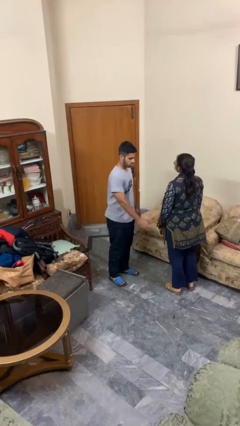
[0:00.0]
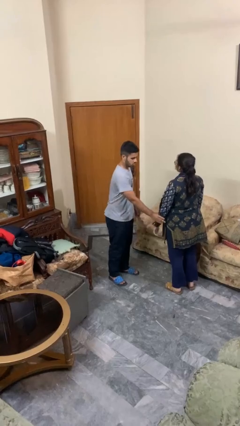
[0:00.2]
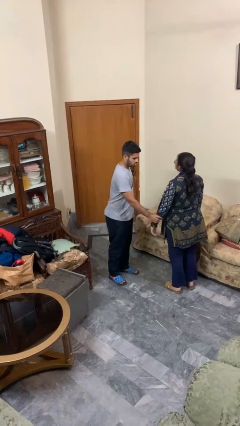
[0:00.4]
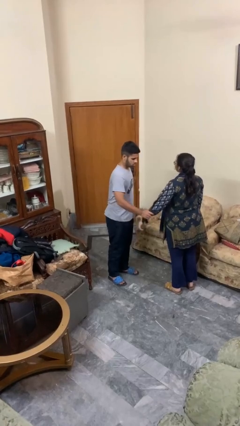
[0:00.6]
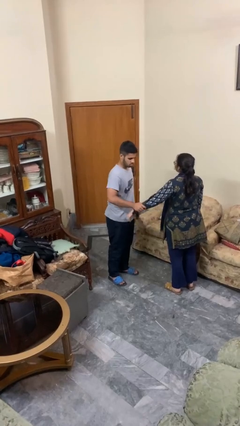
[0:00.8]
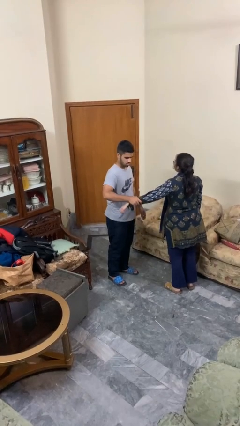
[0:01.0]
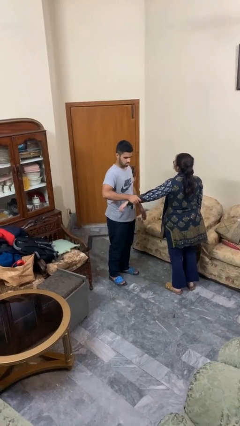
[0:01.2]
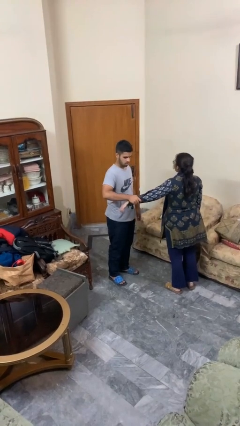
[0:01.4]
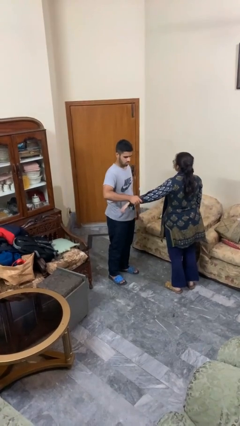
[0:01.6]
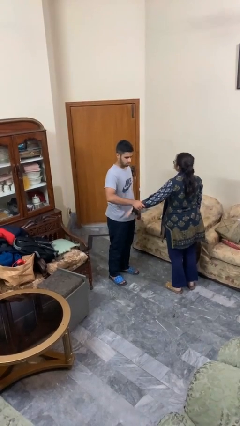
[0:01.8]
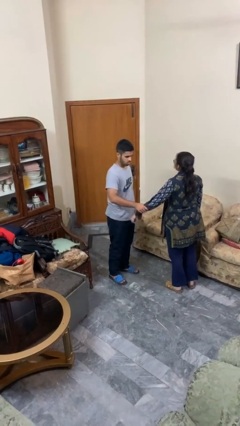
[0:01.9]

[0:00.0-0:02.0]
person grabs person by forearm

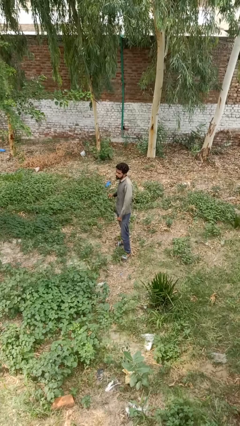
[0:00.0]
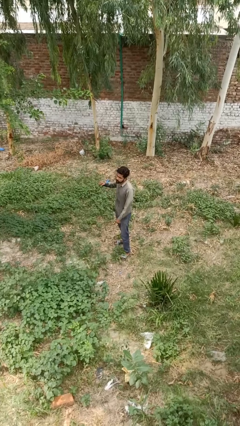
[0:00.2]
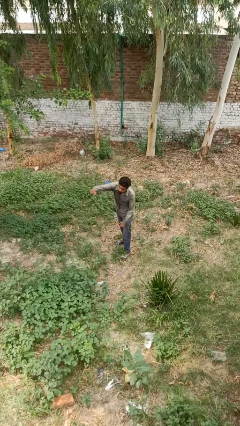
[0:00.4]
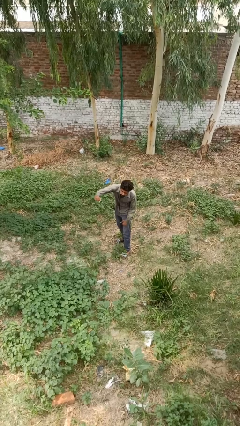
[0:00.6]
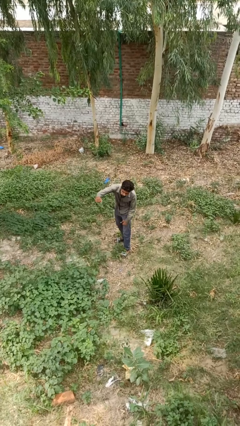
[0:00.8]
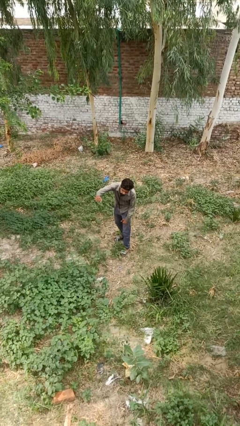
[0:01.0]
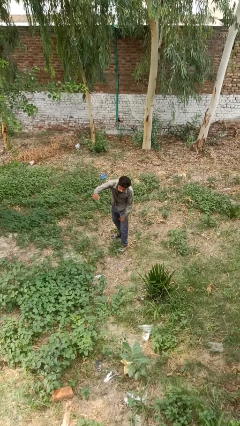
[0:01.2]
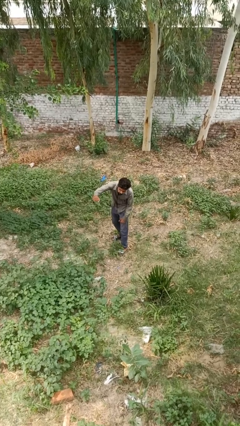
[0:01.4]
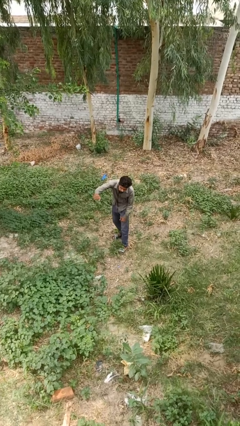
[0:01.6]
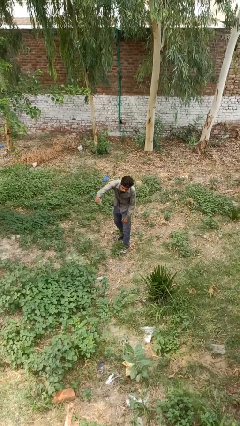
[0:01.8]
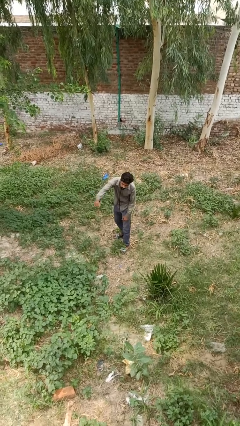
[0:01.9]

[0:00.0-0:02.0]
person punches

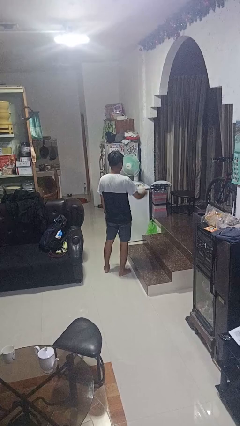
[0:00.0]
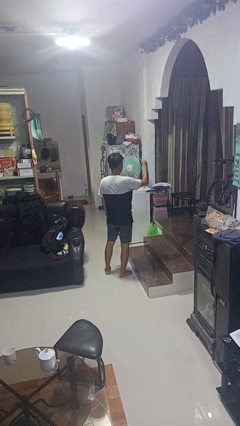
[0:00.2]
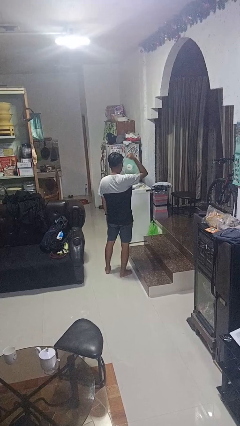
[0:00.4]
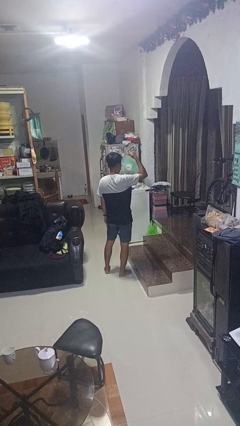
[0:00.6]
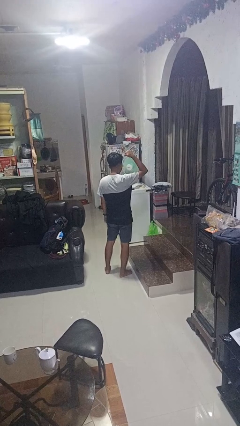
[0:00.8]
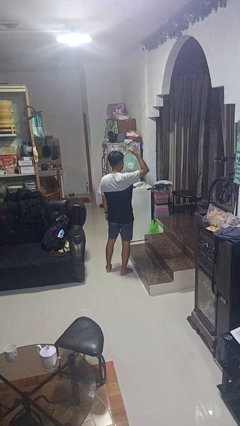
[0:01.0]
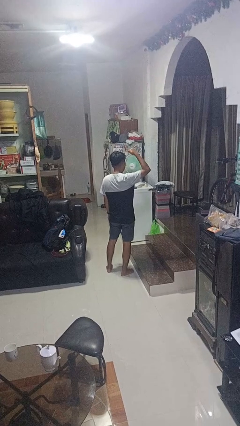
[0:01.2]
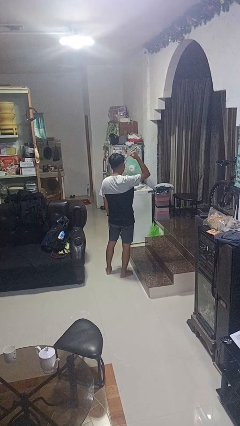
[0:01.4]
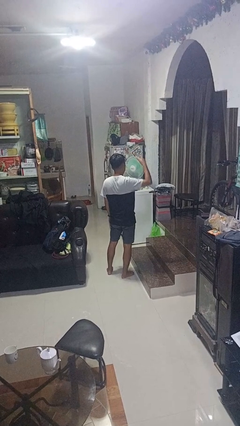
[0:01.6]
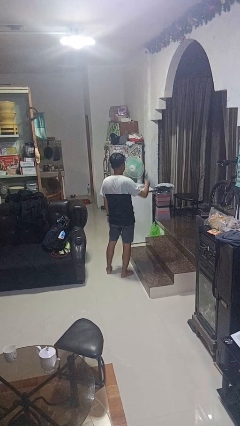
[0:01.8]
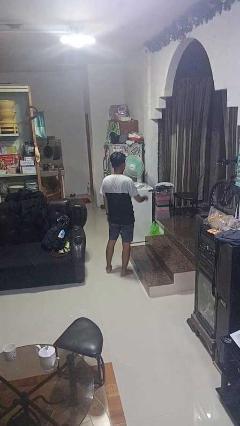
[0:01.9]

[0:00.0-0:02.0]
person gestures behind me

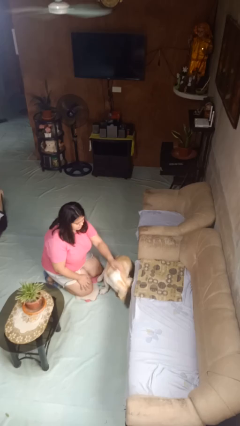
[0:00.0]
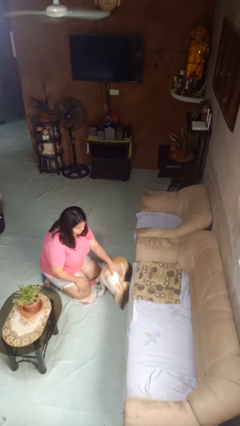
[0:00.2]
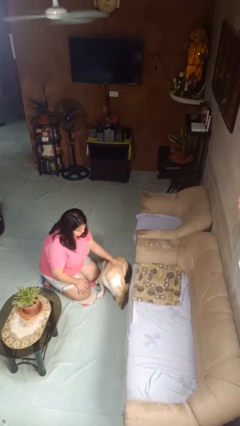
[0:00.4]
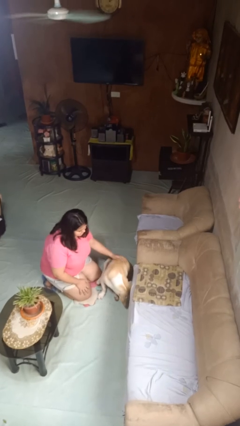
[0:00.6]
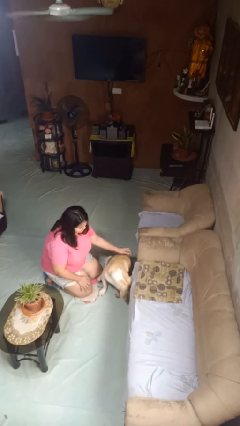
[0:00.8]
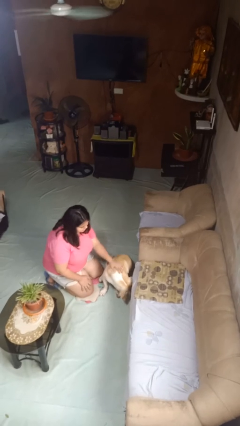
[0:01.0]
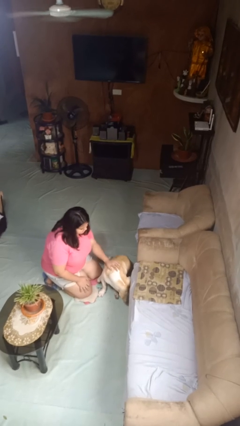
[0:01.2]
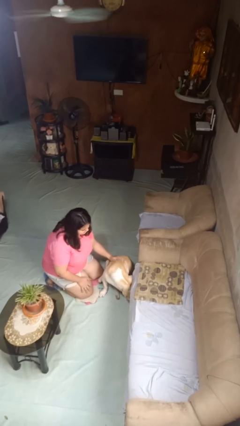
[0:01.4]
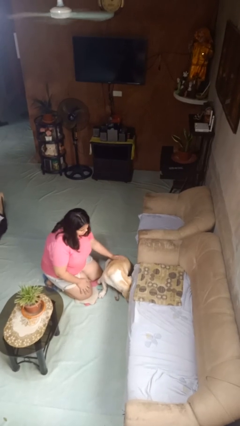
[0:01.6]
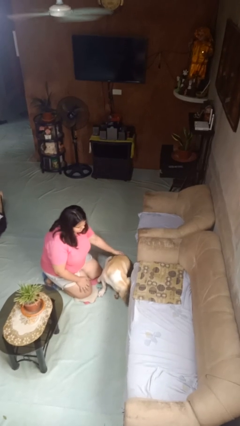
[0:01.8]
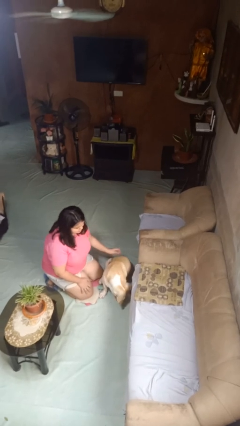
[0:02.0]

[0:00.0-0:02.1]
person pets dog

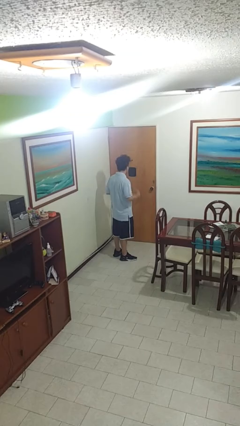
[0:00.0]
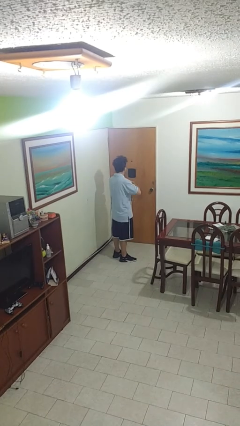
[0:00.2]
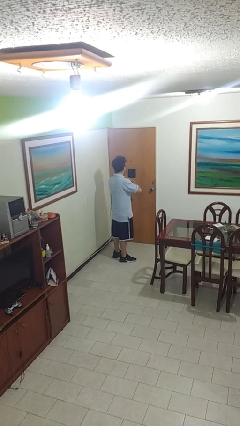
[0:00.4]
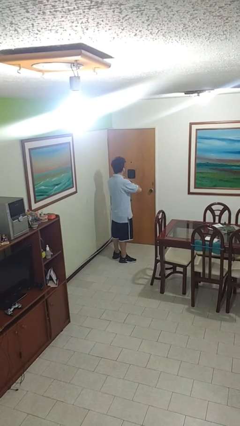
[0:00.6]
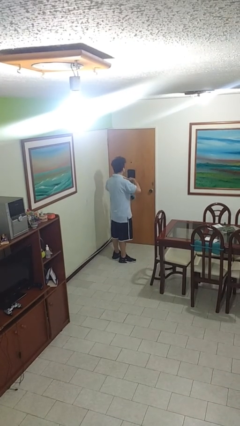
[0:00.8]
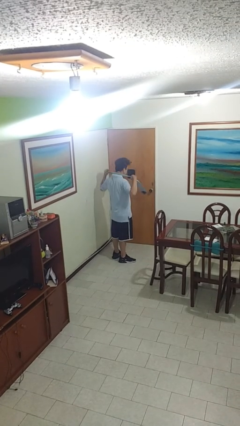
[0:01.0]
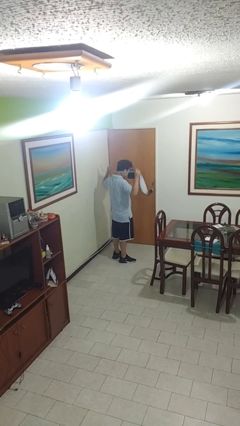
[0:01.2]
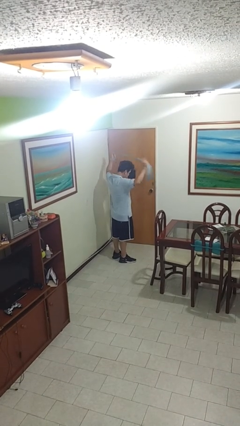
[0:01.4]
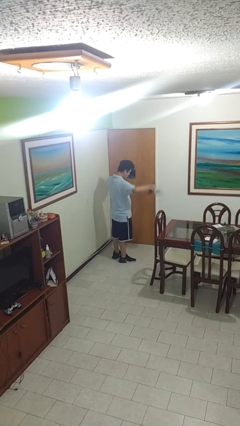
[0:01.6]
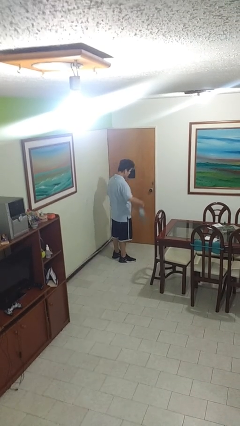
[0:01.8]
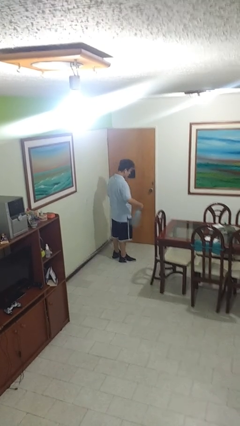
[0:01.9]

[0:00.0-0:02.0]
person takes off necktie

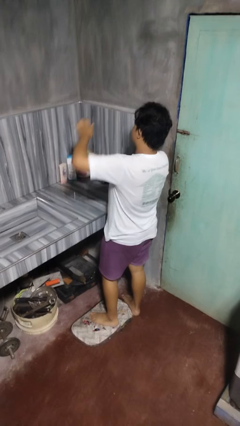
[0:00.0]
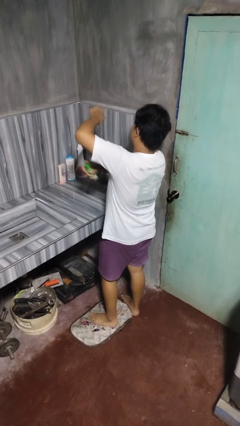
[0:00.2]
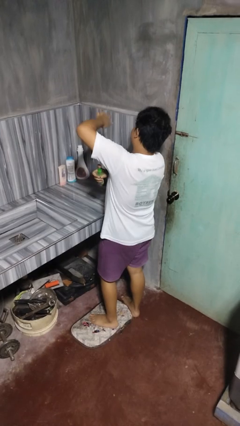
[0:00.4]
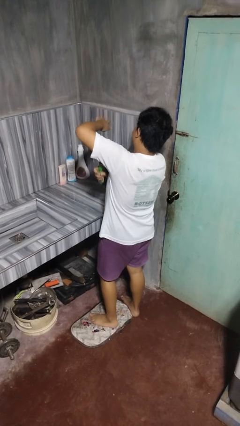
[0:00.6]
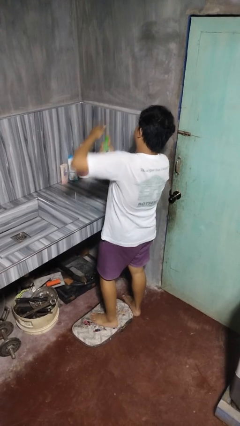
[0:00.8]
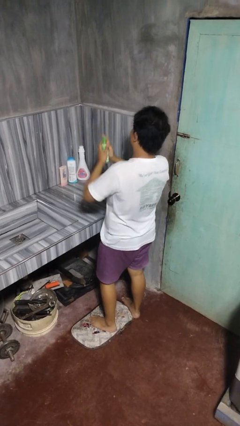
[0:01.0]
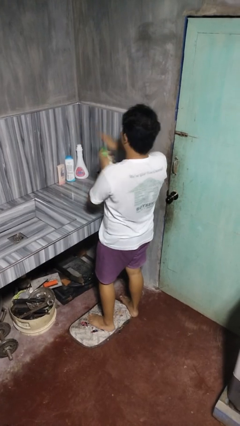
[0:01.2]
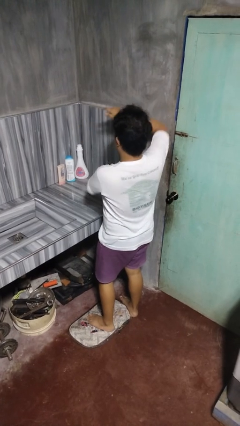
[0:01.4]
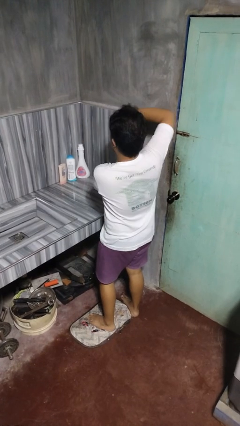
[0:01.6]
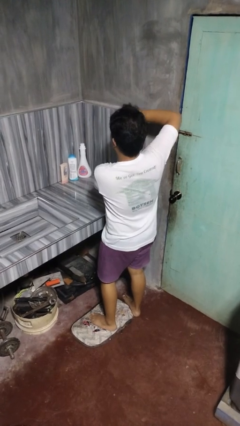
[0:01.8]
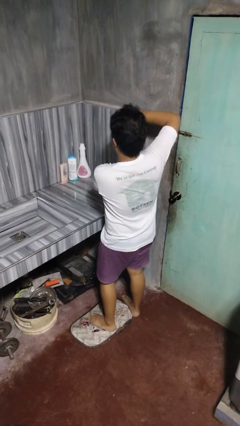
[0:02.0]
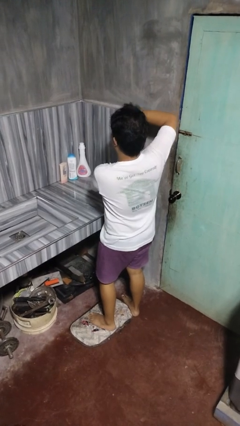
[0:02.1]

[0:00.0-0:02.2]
person applies deodorant

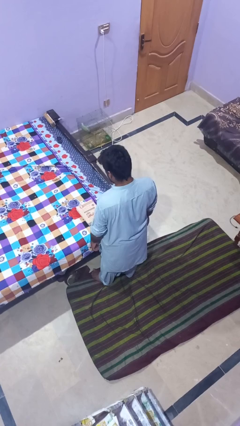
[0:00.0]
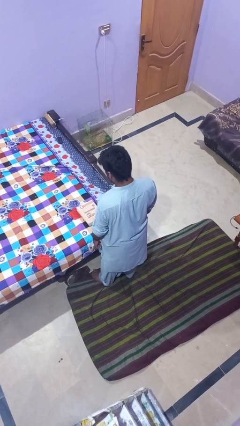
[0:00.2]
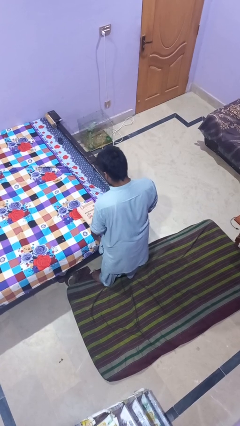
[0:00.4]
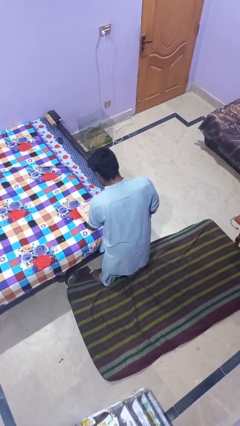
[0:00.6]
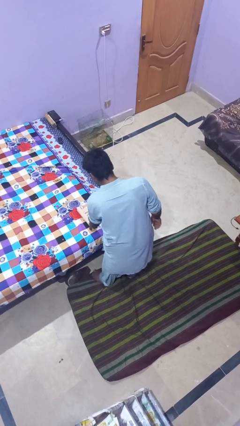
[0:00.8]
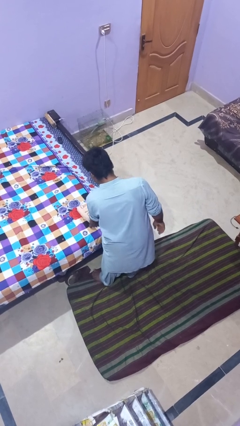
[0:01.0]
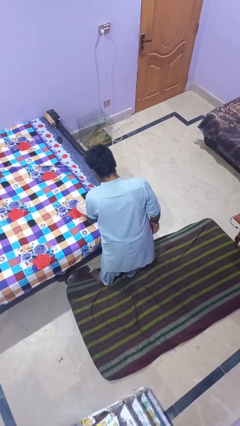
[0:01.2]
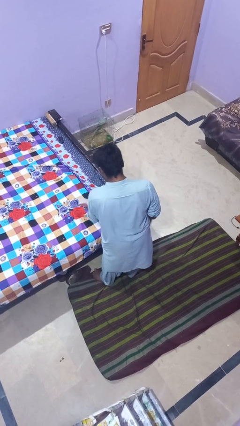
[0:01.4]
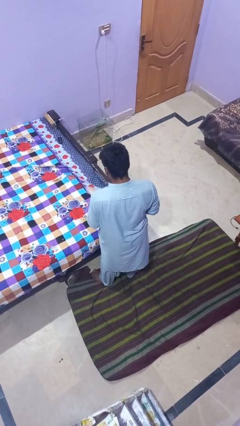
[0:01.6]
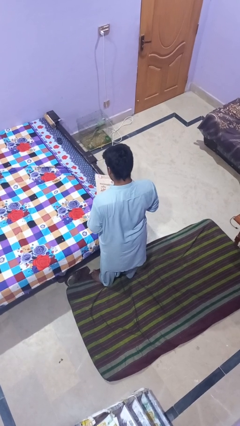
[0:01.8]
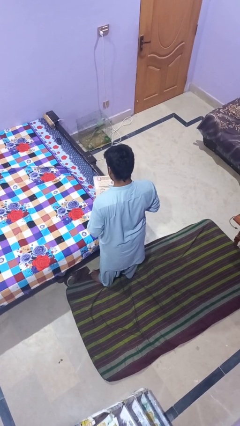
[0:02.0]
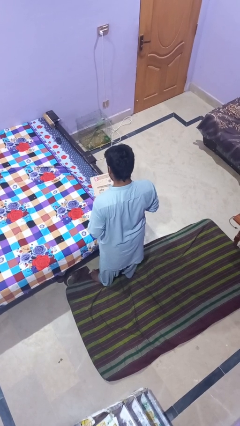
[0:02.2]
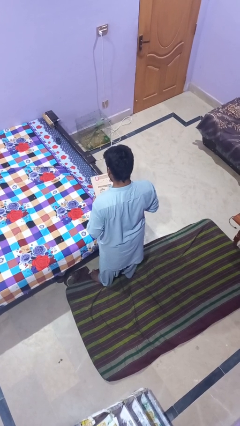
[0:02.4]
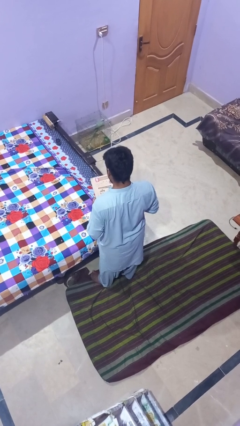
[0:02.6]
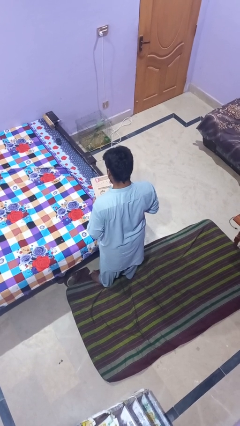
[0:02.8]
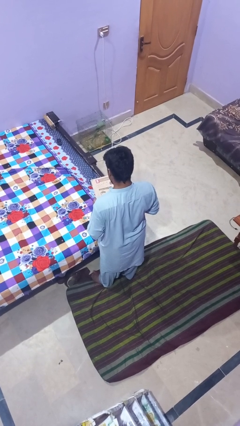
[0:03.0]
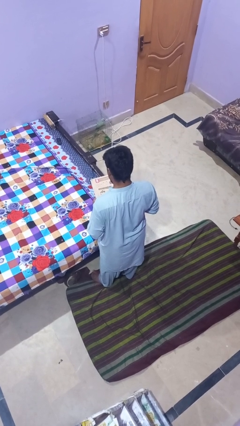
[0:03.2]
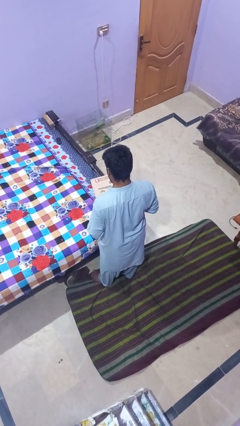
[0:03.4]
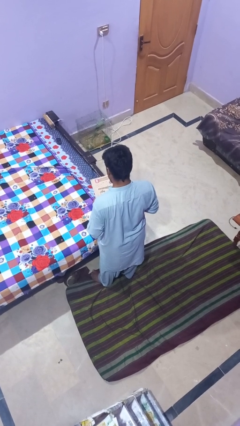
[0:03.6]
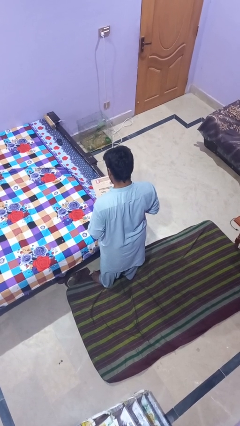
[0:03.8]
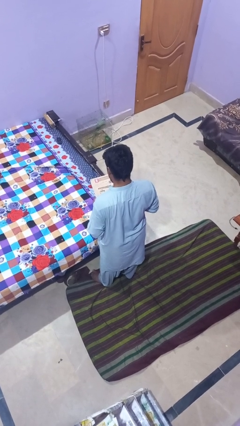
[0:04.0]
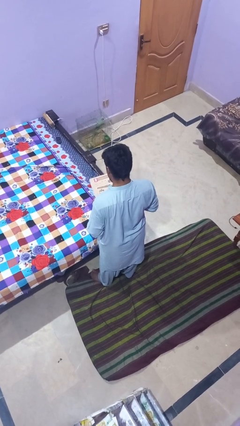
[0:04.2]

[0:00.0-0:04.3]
person picks up object from bed

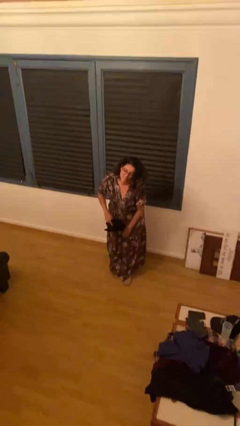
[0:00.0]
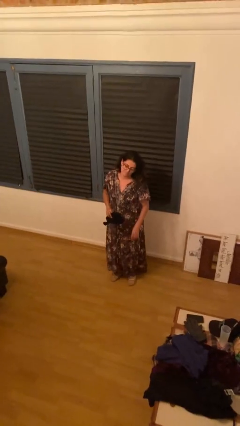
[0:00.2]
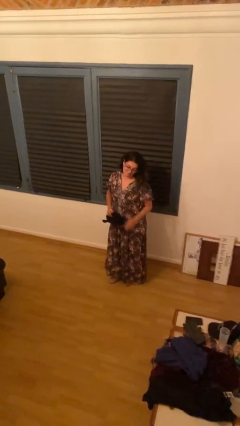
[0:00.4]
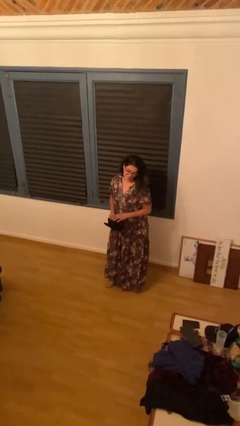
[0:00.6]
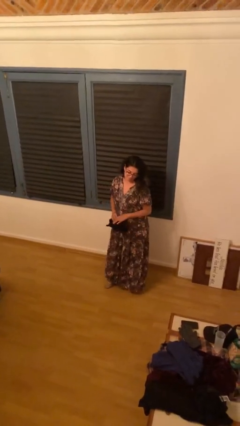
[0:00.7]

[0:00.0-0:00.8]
person picks up object from floor

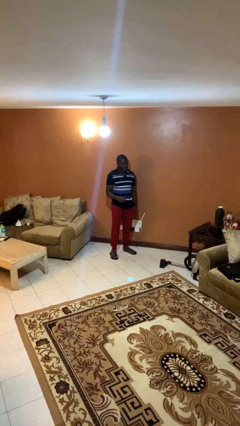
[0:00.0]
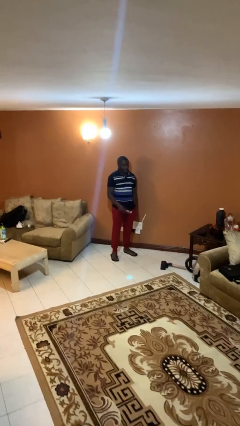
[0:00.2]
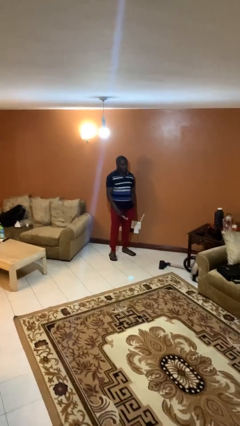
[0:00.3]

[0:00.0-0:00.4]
person brushes teeth
